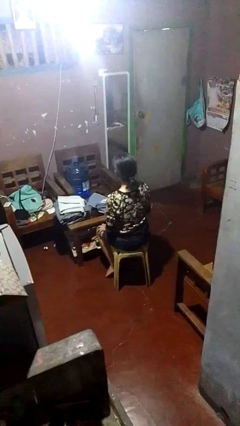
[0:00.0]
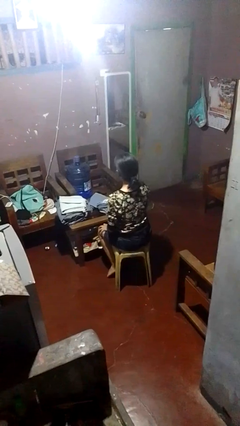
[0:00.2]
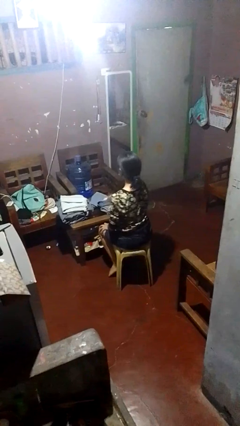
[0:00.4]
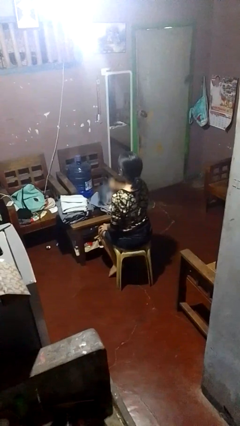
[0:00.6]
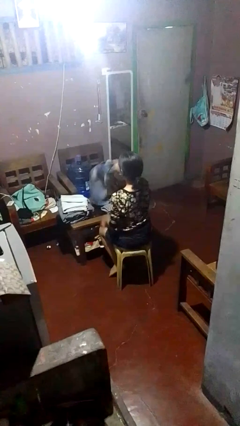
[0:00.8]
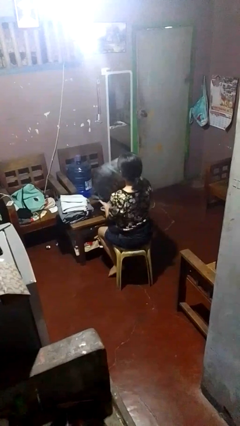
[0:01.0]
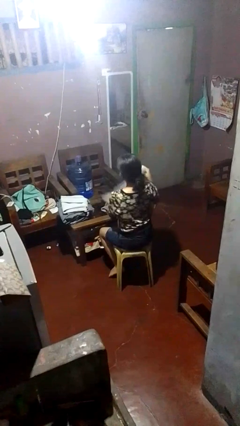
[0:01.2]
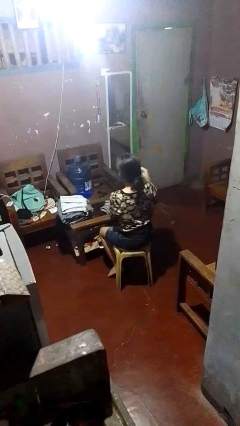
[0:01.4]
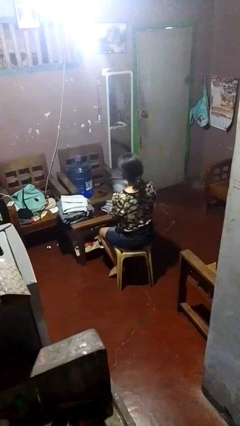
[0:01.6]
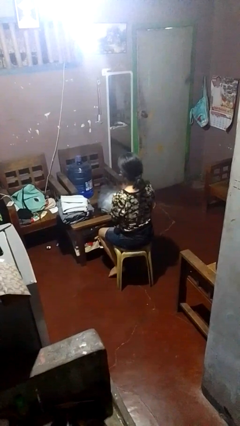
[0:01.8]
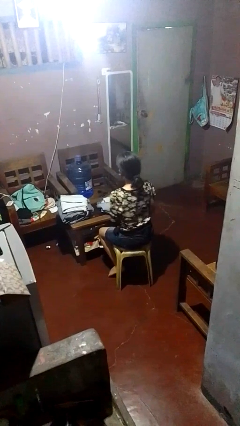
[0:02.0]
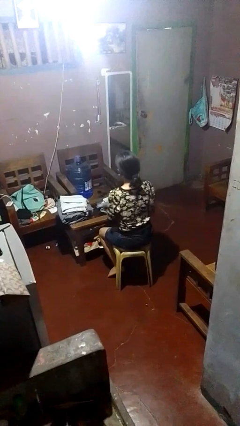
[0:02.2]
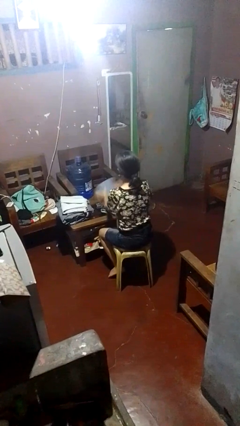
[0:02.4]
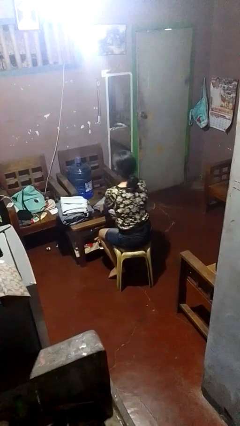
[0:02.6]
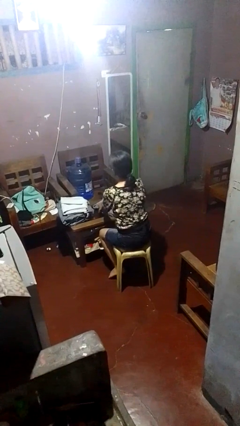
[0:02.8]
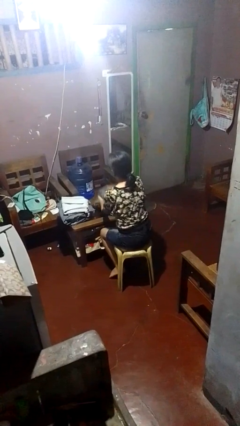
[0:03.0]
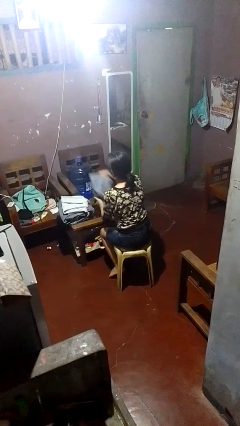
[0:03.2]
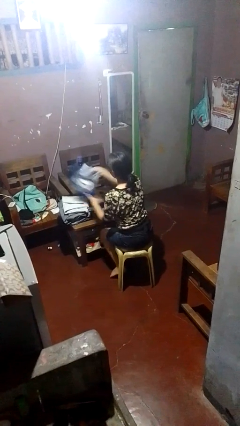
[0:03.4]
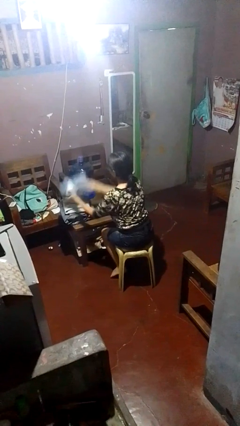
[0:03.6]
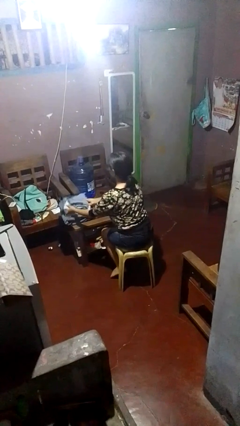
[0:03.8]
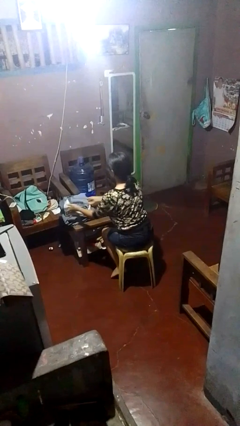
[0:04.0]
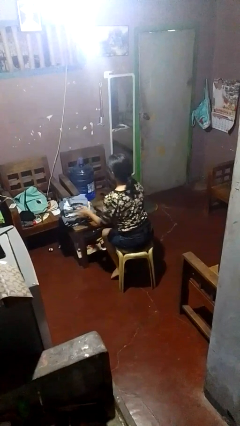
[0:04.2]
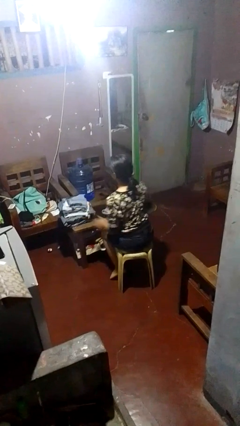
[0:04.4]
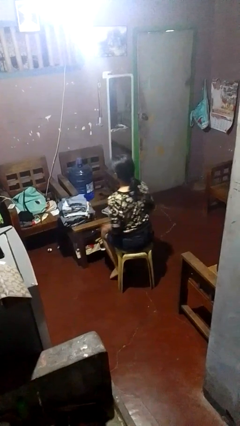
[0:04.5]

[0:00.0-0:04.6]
person folds pants

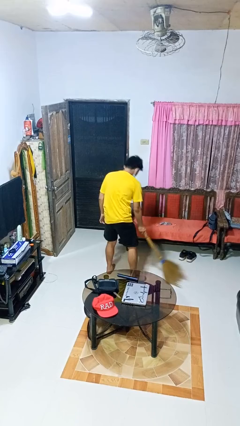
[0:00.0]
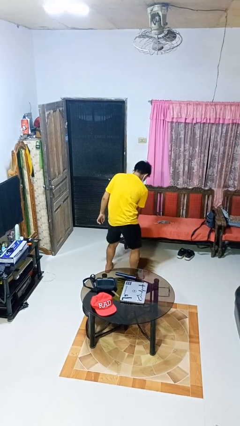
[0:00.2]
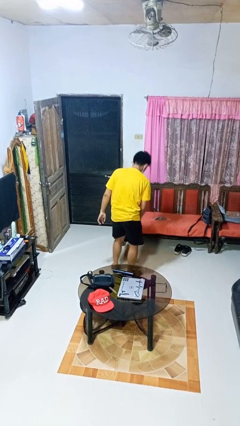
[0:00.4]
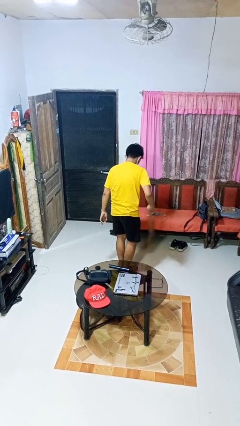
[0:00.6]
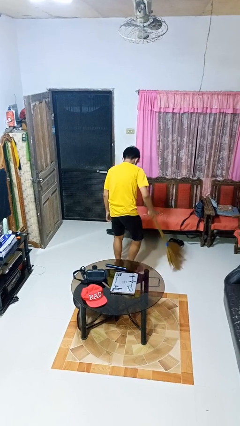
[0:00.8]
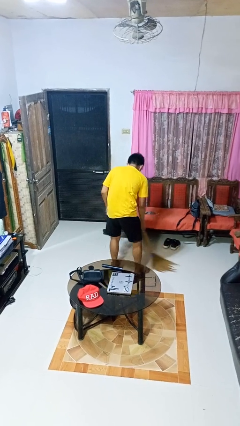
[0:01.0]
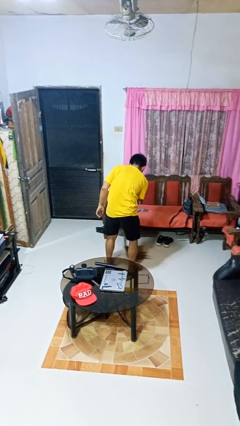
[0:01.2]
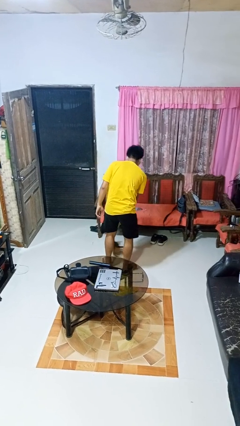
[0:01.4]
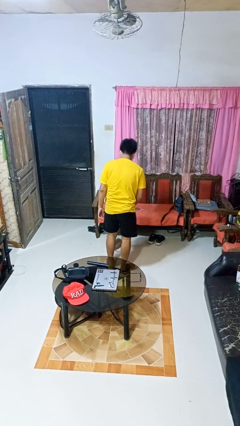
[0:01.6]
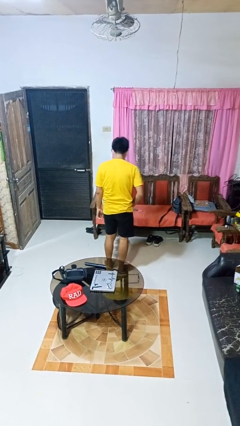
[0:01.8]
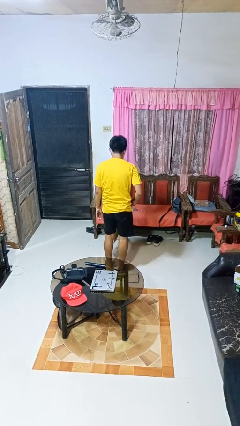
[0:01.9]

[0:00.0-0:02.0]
person sweeps floor

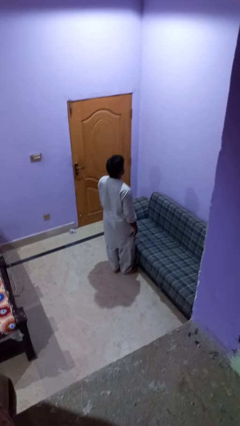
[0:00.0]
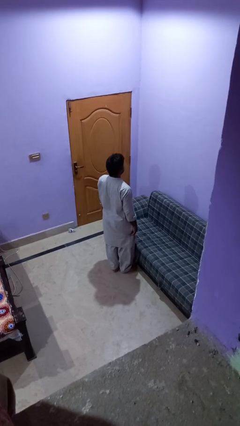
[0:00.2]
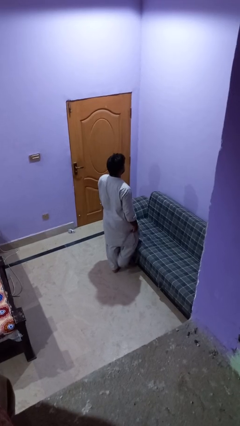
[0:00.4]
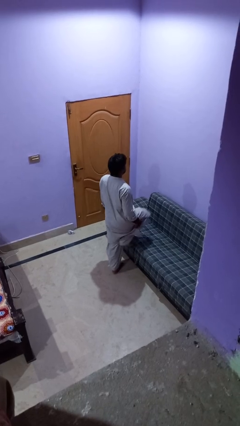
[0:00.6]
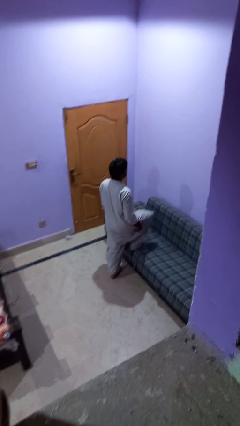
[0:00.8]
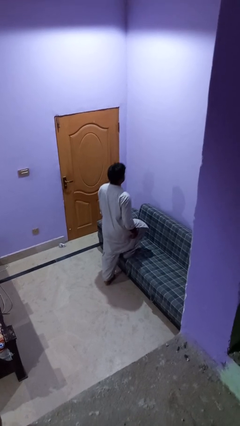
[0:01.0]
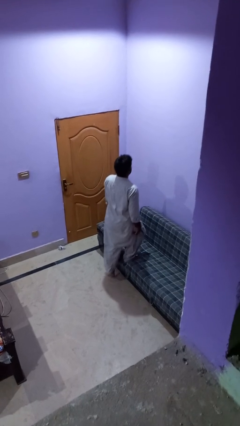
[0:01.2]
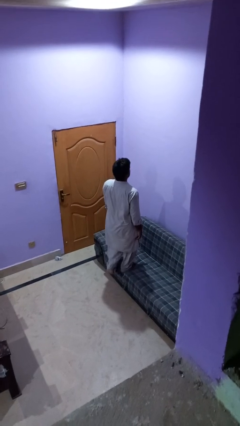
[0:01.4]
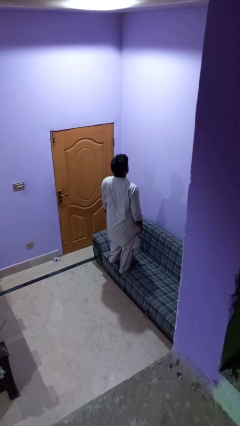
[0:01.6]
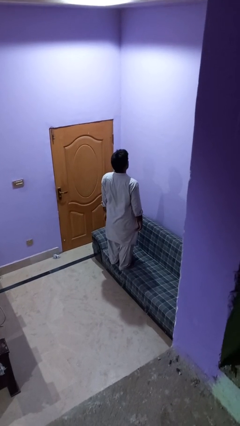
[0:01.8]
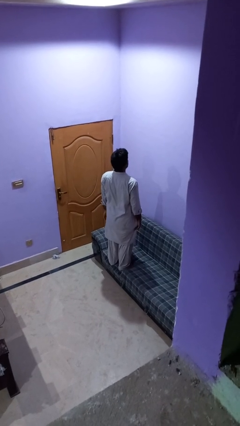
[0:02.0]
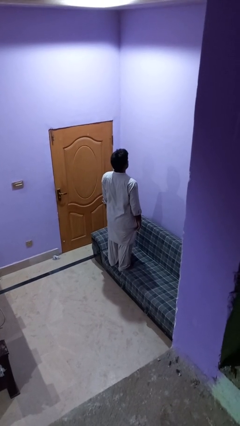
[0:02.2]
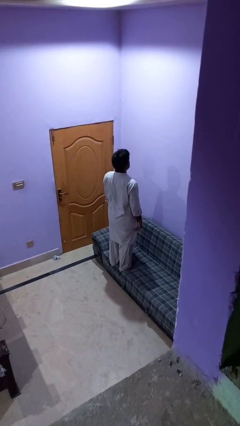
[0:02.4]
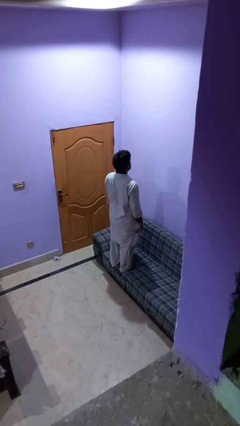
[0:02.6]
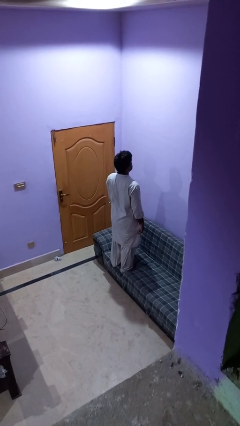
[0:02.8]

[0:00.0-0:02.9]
person climbs on couch

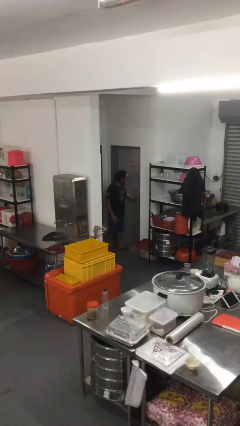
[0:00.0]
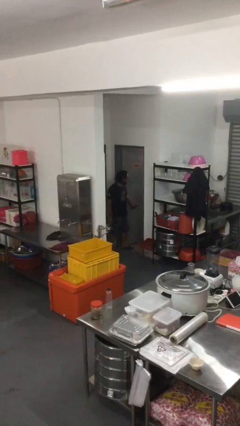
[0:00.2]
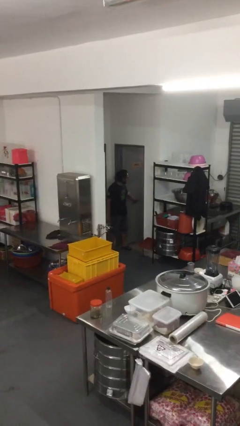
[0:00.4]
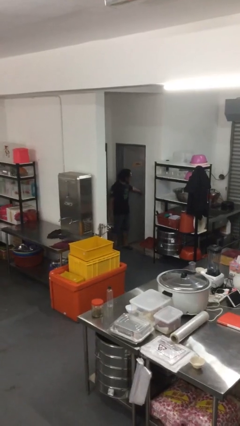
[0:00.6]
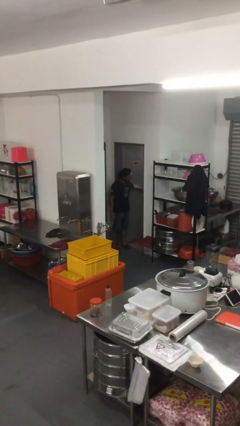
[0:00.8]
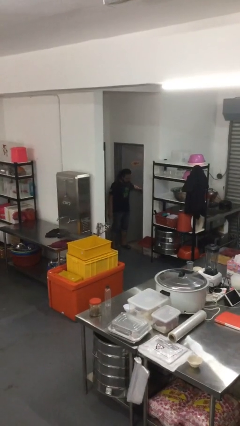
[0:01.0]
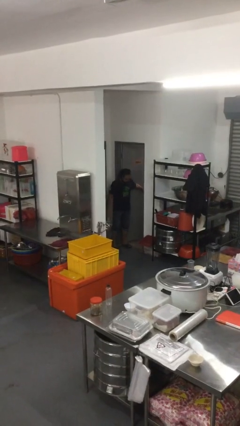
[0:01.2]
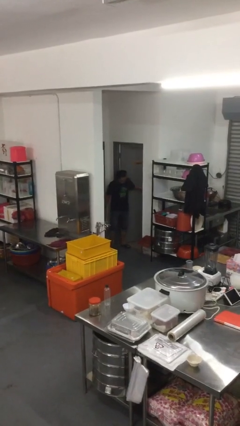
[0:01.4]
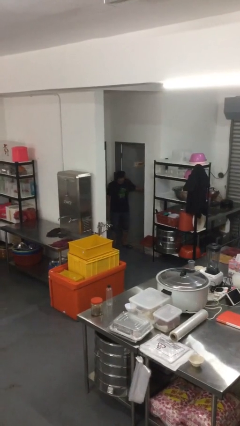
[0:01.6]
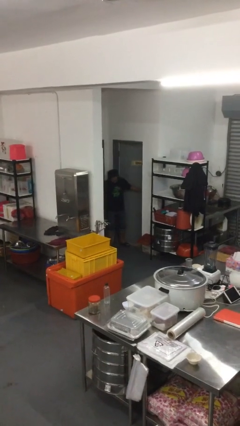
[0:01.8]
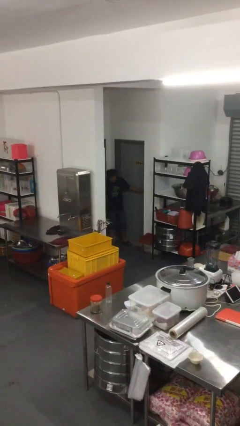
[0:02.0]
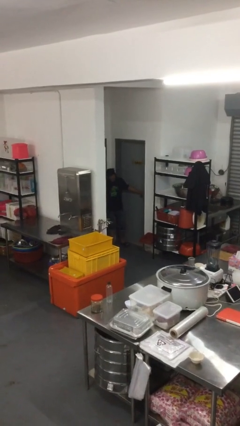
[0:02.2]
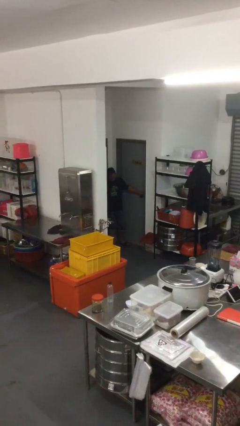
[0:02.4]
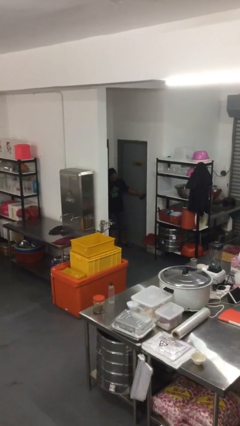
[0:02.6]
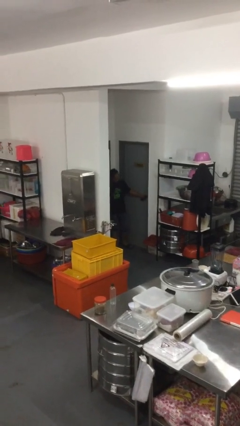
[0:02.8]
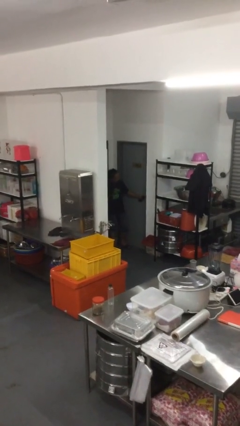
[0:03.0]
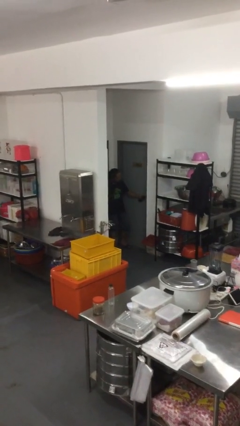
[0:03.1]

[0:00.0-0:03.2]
person closes facility door

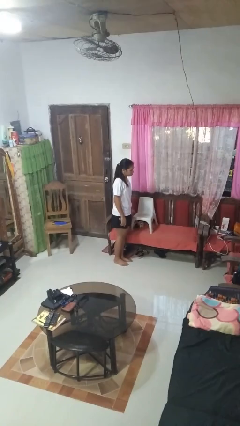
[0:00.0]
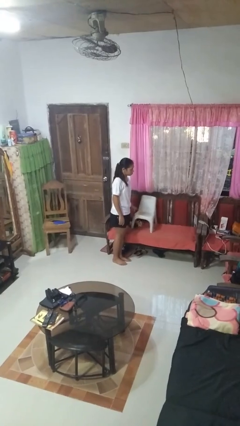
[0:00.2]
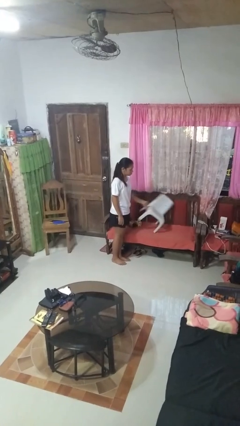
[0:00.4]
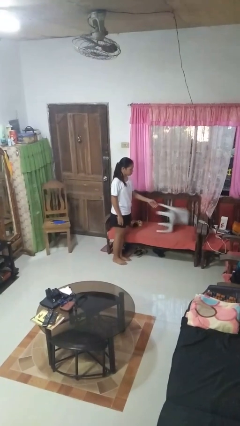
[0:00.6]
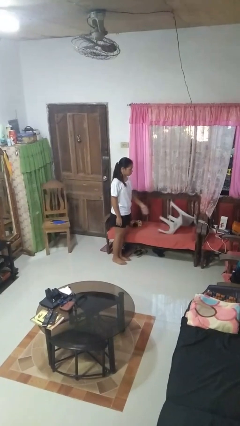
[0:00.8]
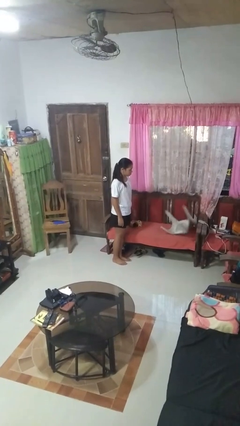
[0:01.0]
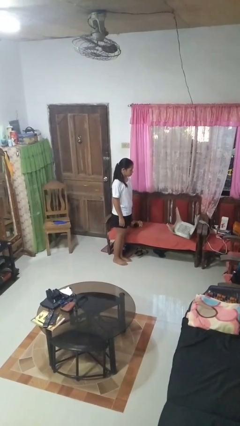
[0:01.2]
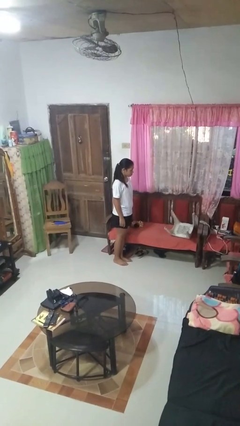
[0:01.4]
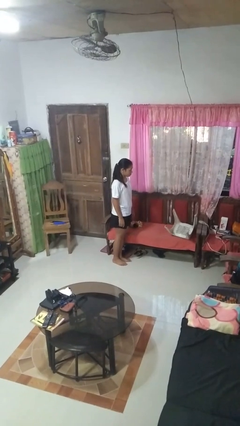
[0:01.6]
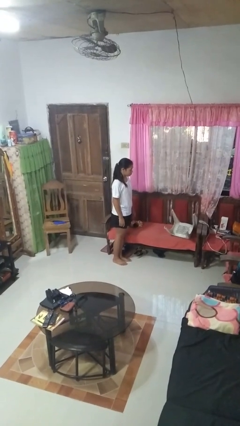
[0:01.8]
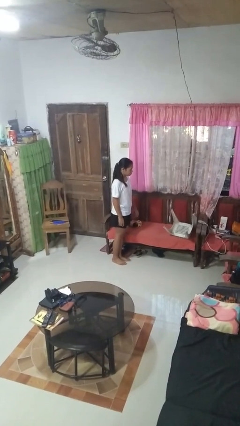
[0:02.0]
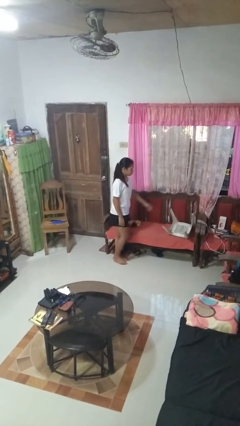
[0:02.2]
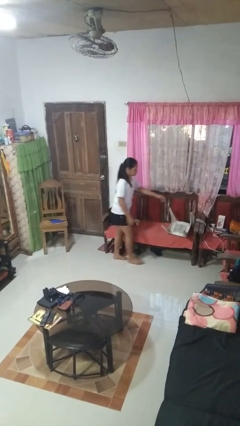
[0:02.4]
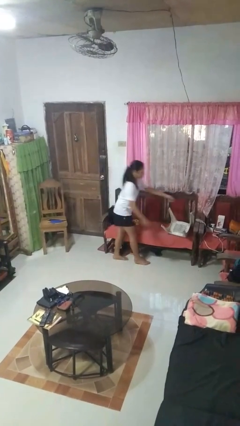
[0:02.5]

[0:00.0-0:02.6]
person knocks over furniture

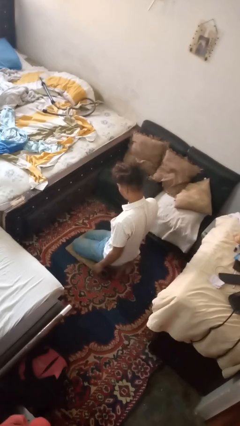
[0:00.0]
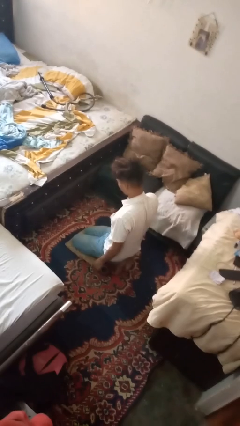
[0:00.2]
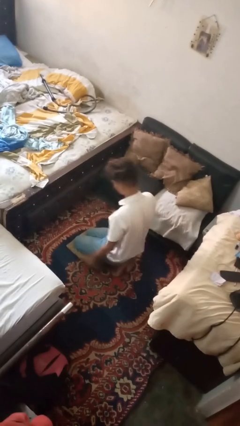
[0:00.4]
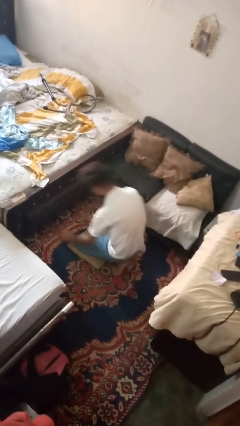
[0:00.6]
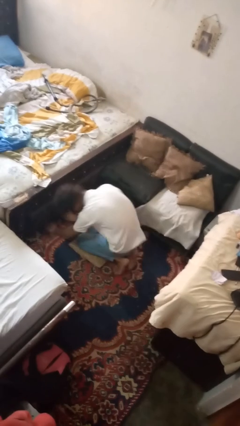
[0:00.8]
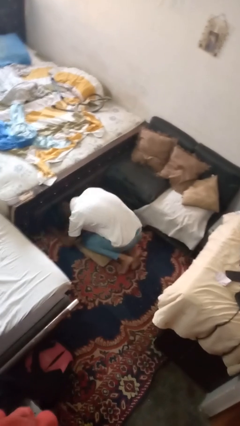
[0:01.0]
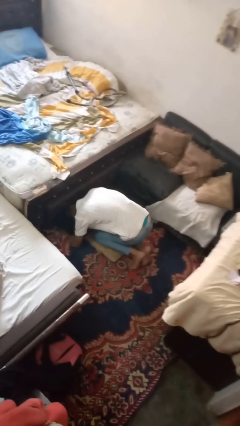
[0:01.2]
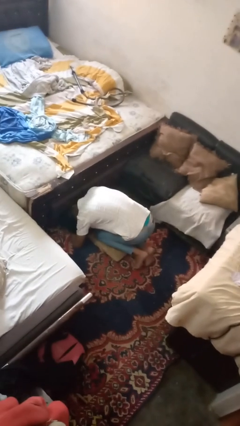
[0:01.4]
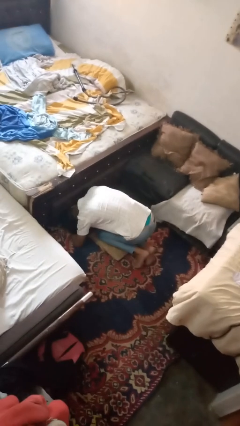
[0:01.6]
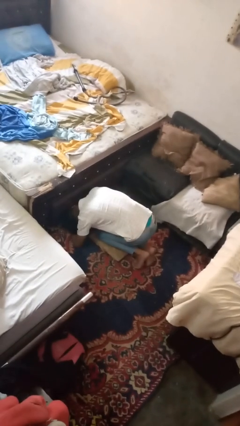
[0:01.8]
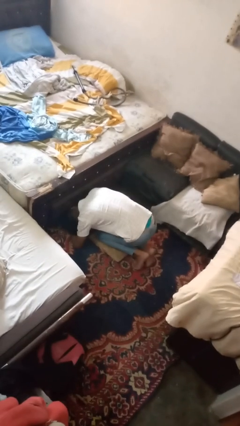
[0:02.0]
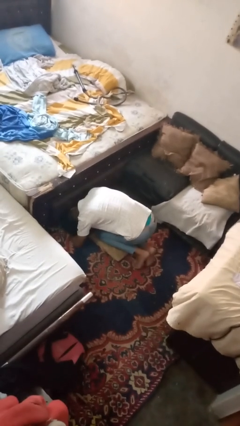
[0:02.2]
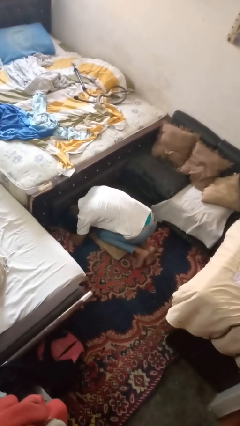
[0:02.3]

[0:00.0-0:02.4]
person searches under bed
